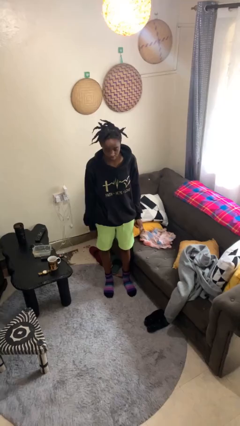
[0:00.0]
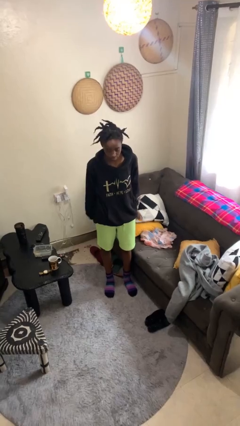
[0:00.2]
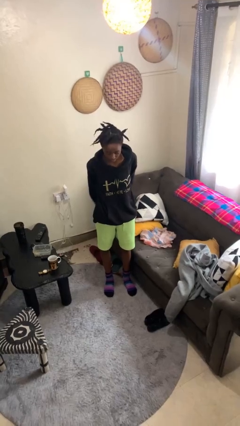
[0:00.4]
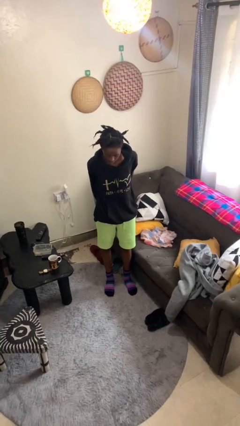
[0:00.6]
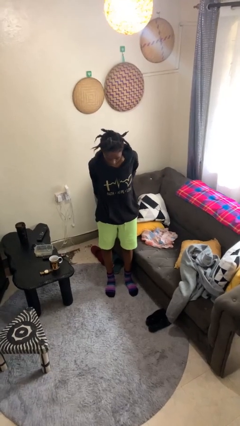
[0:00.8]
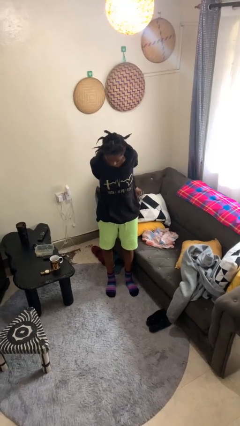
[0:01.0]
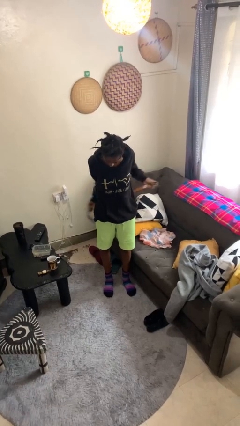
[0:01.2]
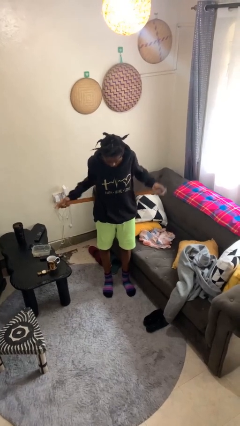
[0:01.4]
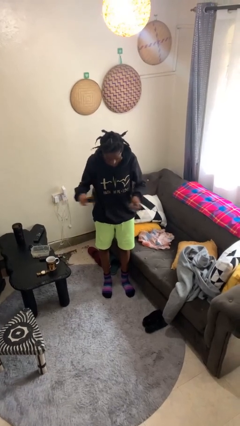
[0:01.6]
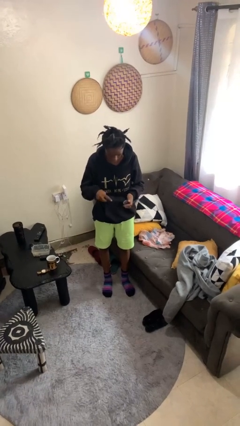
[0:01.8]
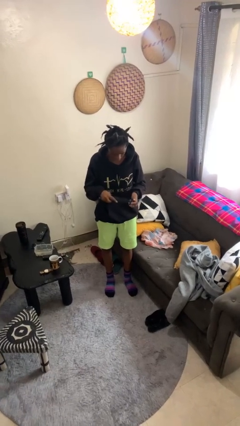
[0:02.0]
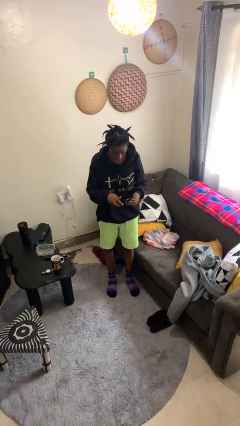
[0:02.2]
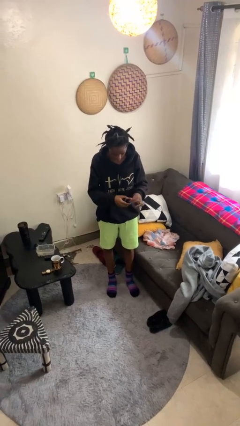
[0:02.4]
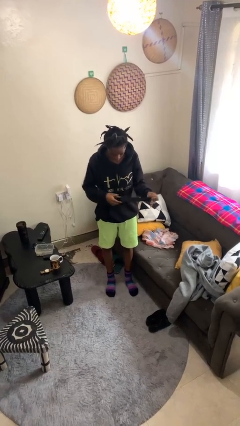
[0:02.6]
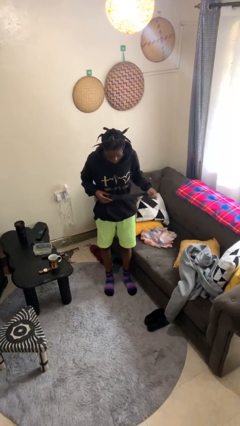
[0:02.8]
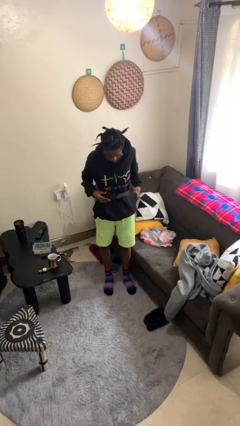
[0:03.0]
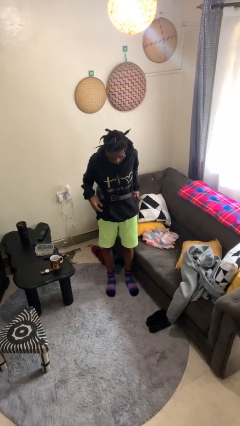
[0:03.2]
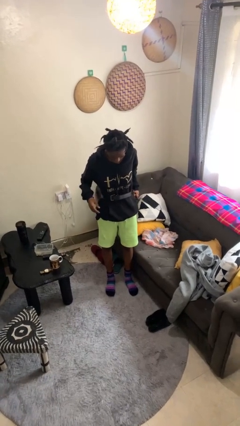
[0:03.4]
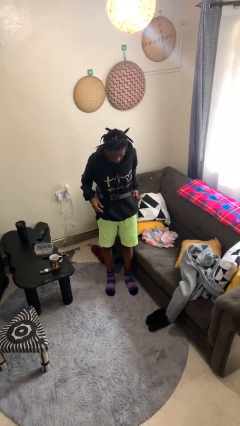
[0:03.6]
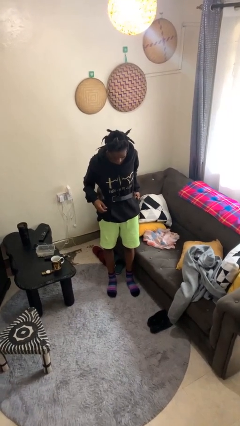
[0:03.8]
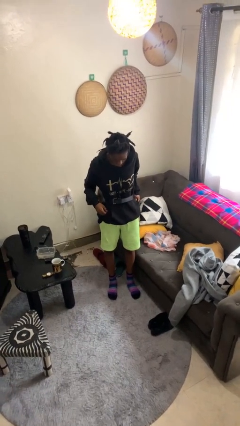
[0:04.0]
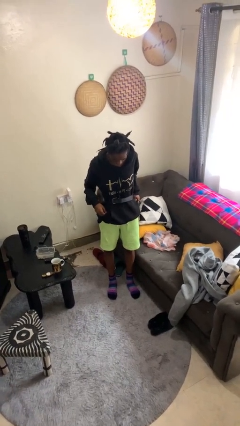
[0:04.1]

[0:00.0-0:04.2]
person puts on belt

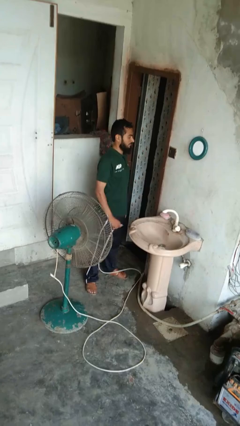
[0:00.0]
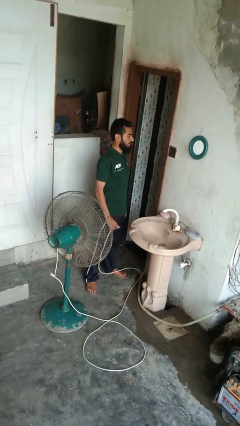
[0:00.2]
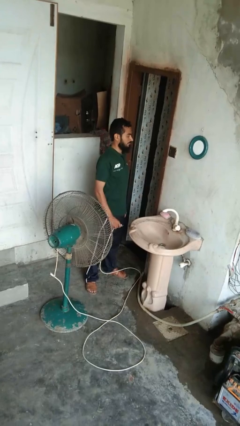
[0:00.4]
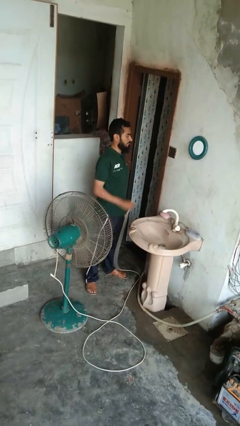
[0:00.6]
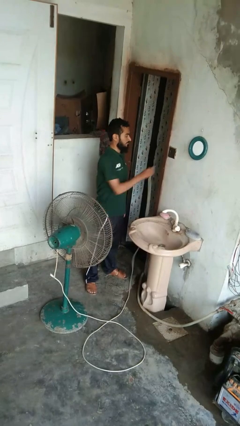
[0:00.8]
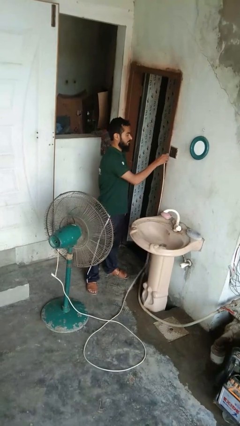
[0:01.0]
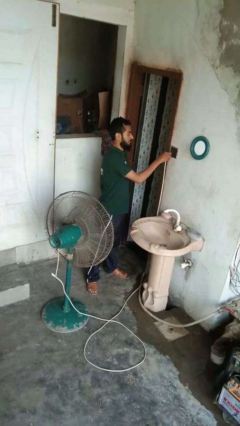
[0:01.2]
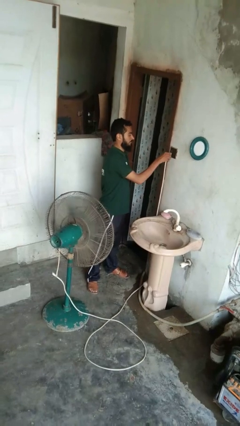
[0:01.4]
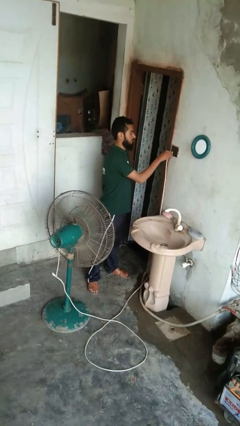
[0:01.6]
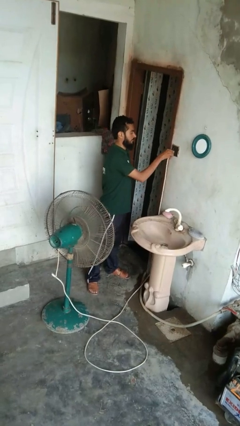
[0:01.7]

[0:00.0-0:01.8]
person turns on fan

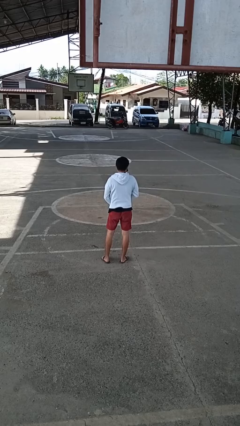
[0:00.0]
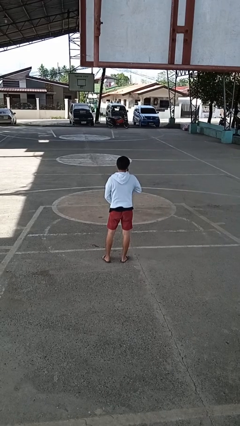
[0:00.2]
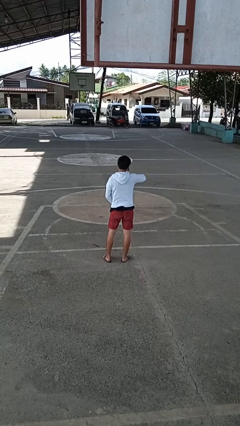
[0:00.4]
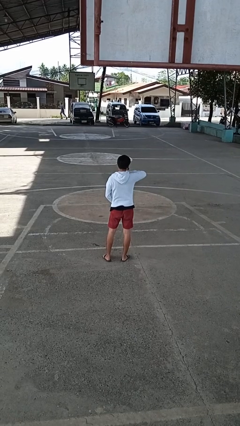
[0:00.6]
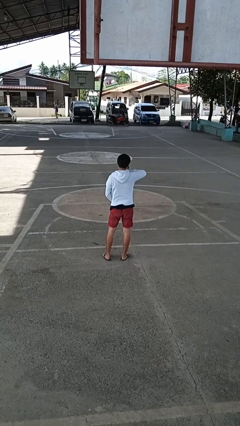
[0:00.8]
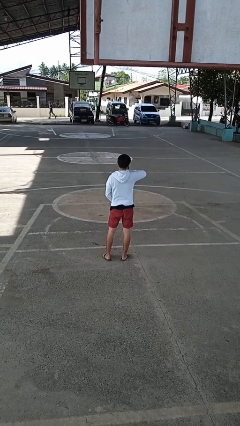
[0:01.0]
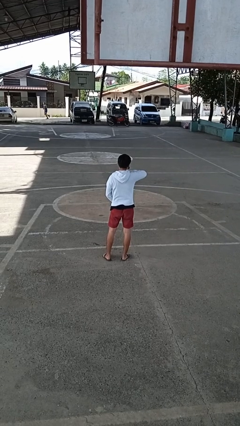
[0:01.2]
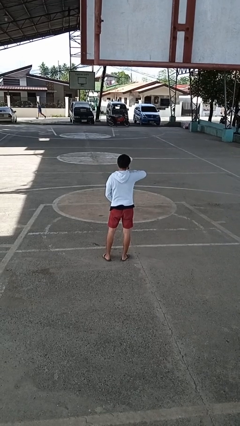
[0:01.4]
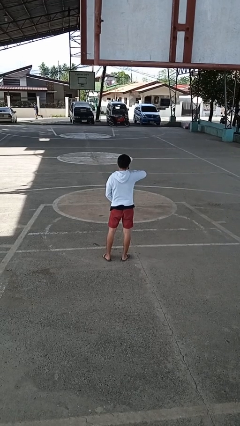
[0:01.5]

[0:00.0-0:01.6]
person zips up jacket

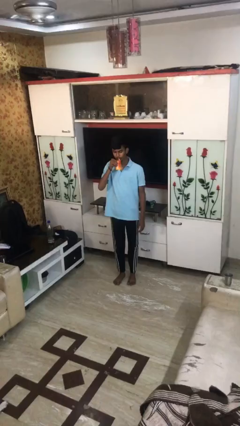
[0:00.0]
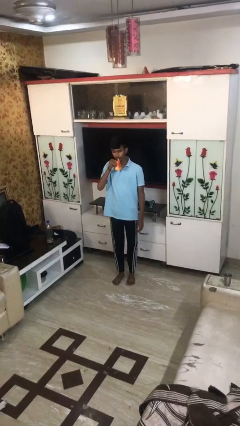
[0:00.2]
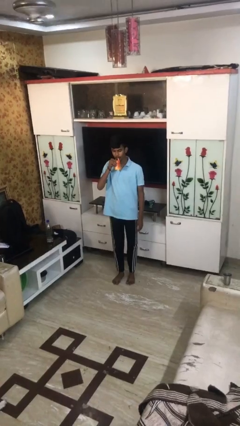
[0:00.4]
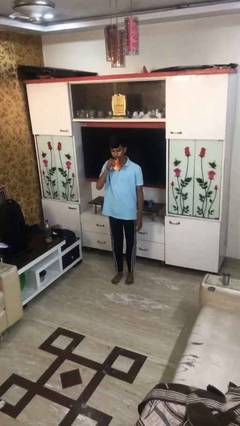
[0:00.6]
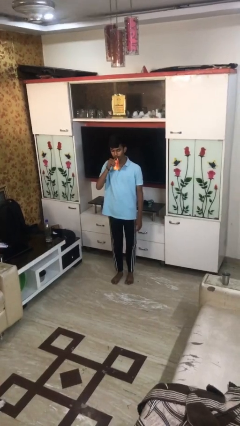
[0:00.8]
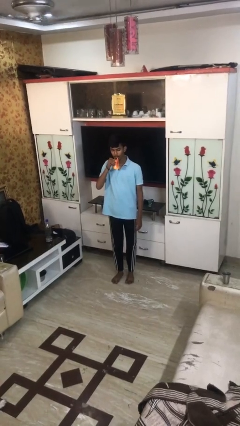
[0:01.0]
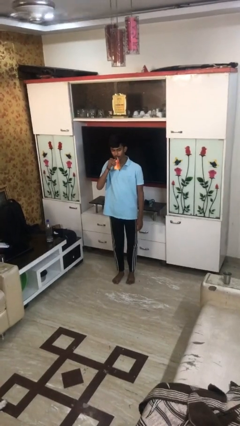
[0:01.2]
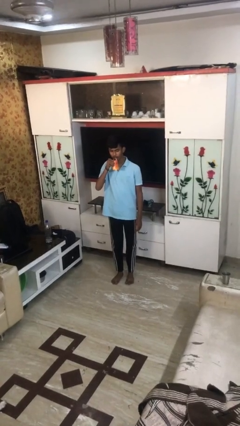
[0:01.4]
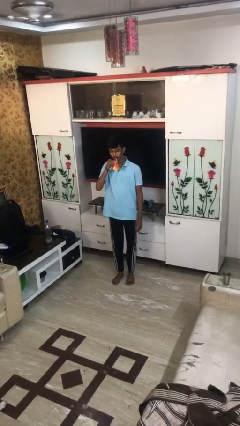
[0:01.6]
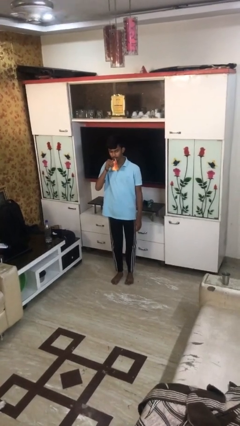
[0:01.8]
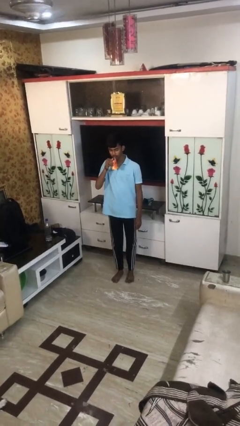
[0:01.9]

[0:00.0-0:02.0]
person drinks from straw

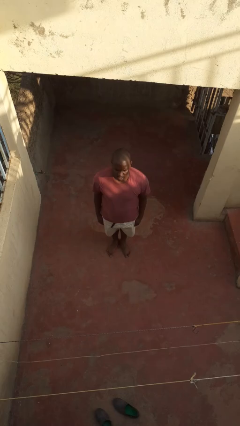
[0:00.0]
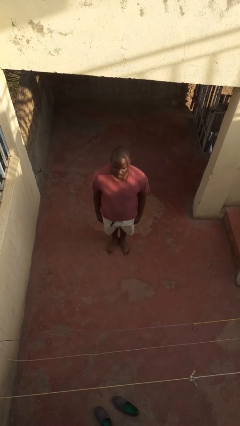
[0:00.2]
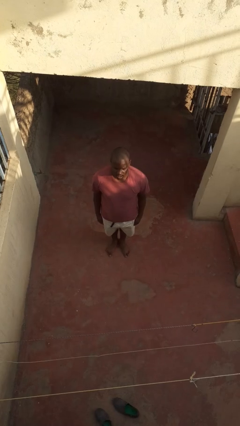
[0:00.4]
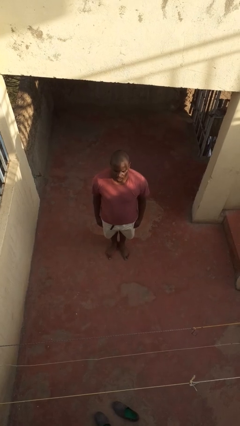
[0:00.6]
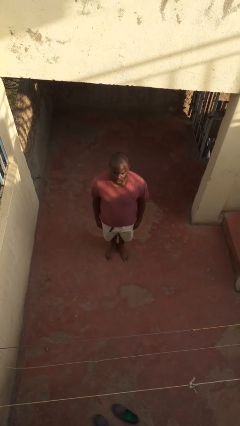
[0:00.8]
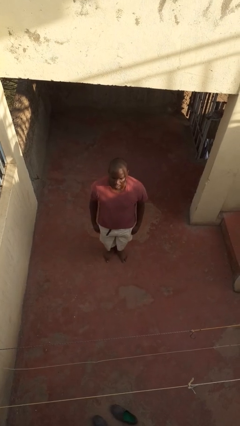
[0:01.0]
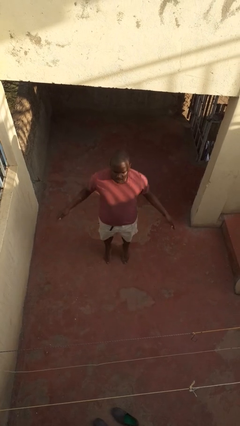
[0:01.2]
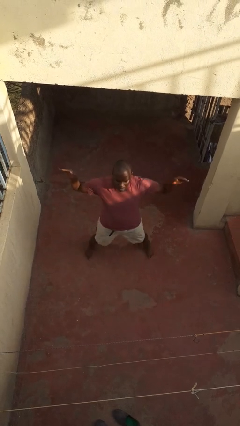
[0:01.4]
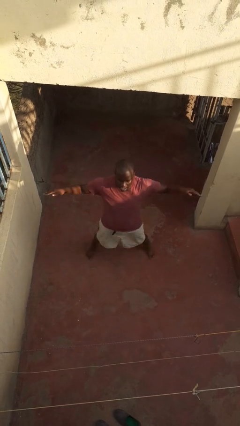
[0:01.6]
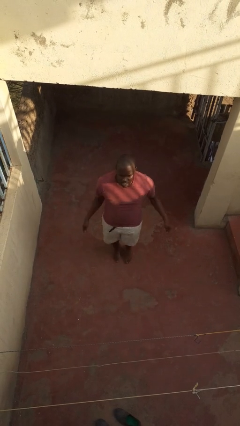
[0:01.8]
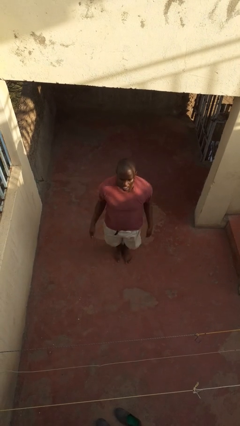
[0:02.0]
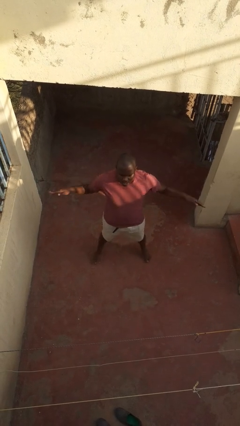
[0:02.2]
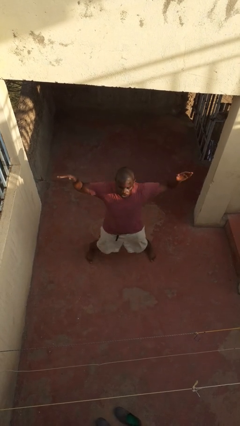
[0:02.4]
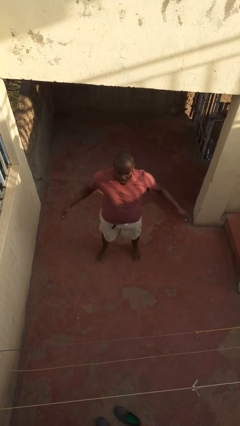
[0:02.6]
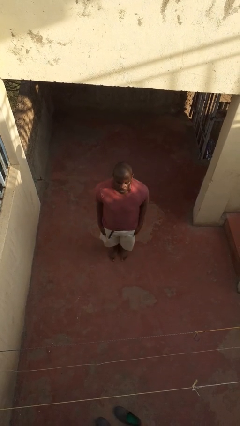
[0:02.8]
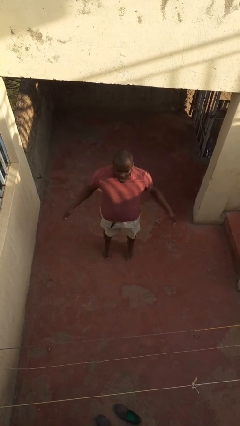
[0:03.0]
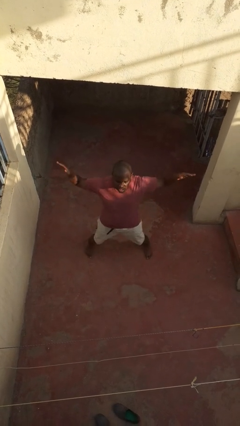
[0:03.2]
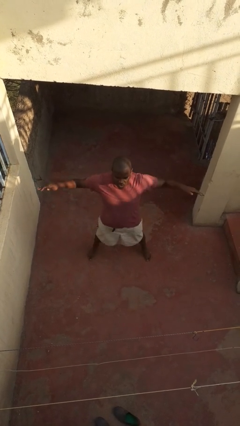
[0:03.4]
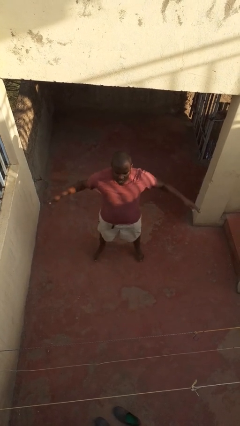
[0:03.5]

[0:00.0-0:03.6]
person exercises with jumping jacks

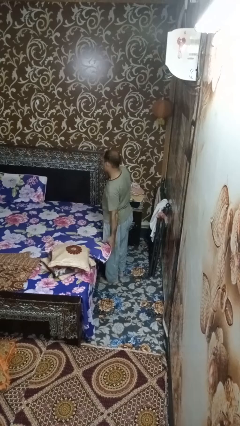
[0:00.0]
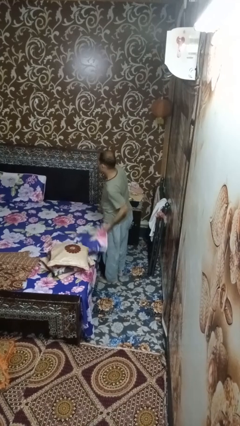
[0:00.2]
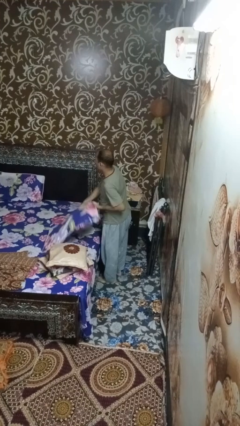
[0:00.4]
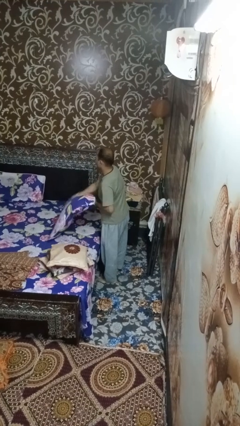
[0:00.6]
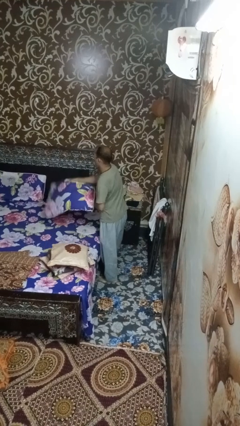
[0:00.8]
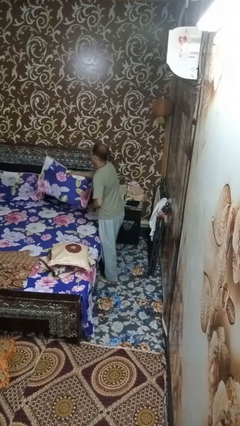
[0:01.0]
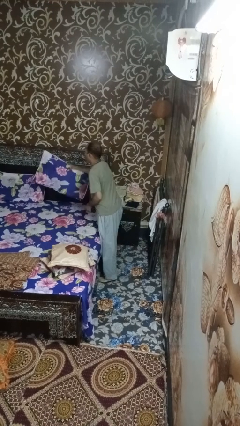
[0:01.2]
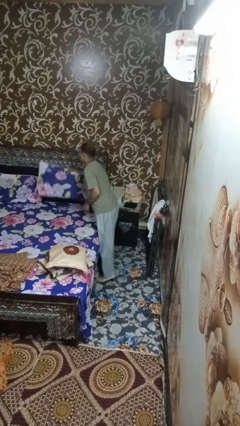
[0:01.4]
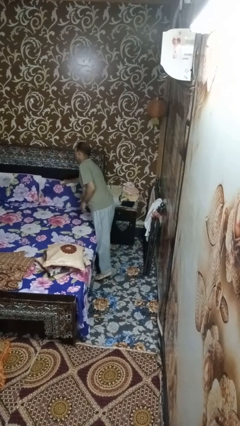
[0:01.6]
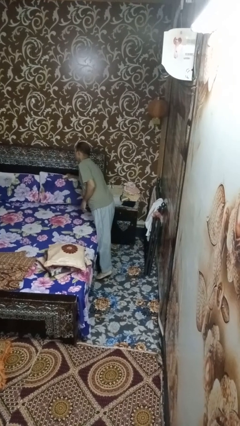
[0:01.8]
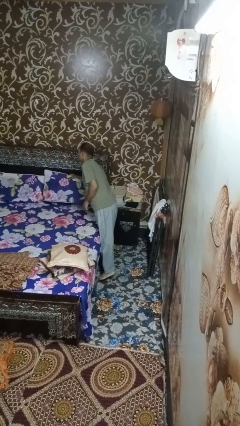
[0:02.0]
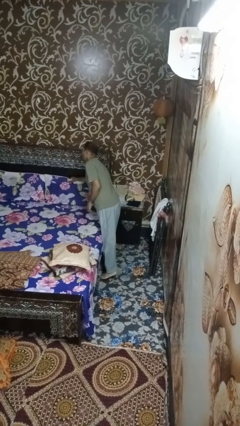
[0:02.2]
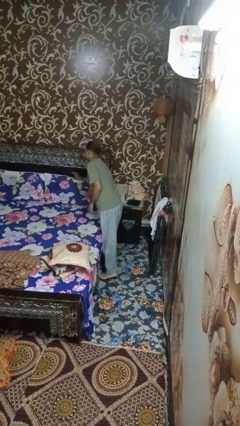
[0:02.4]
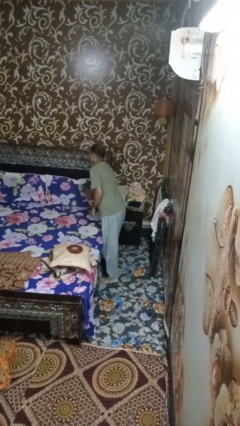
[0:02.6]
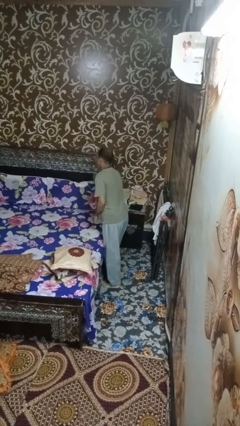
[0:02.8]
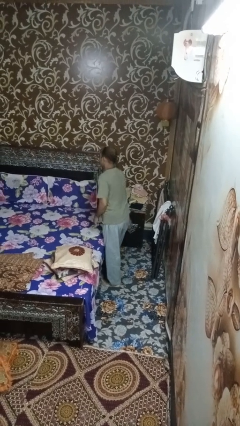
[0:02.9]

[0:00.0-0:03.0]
person makes bed

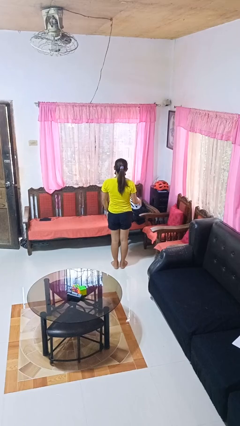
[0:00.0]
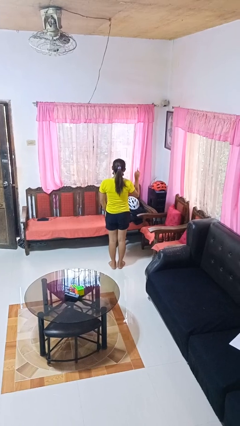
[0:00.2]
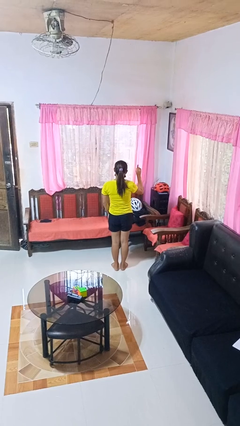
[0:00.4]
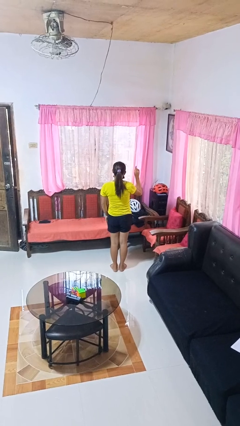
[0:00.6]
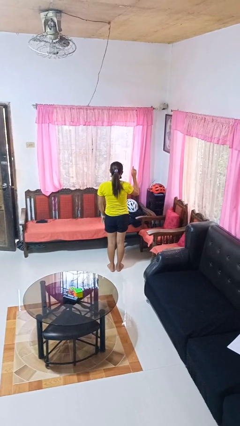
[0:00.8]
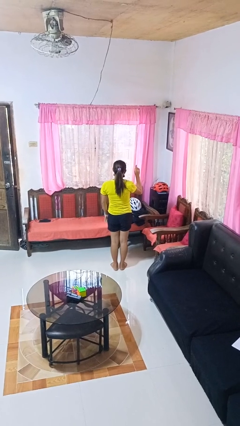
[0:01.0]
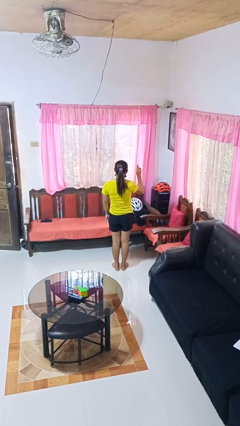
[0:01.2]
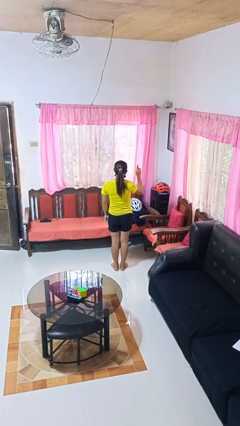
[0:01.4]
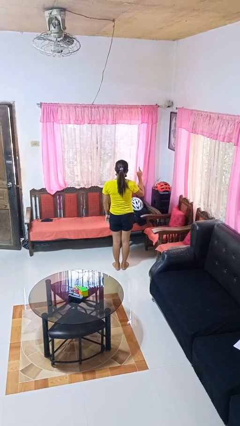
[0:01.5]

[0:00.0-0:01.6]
person gestures number one
